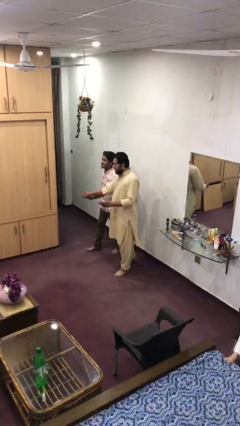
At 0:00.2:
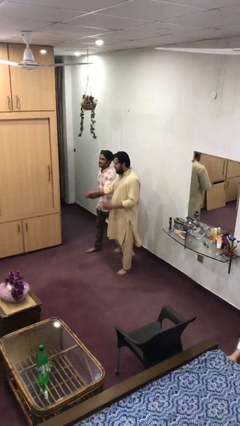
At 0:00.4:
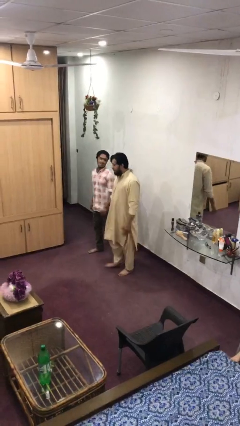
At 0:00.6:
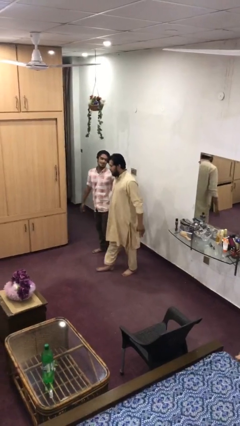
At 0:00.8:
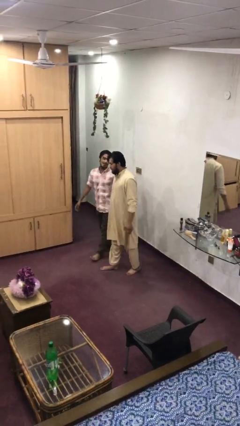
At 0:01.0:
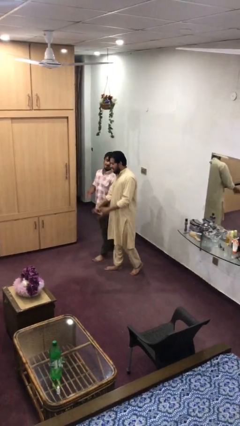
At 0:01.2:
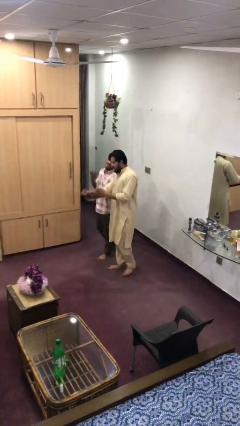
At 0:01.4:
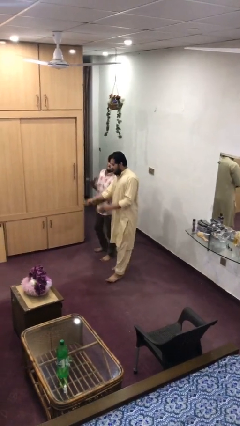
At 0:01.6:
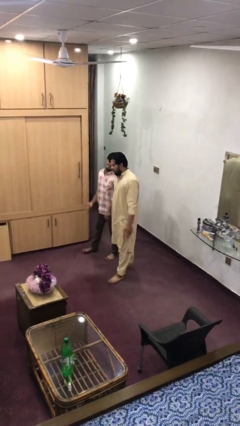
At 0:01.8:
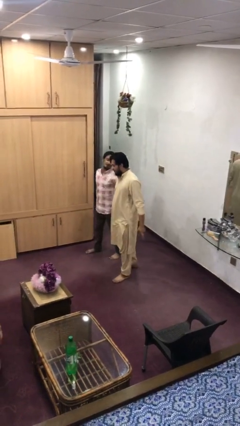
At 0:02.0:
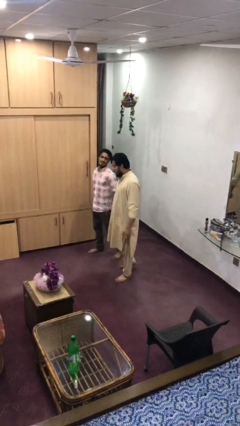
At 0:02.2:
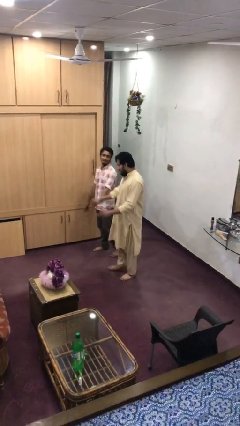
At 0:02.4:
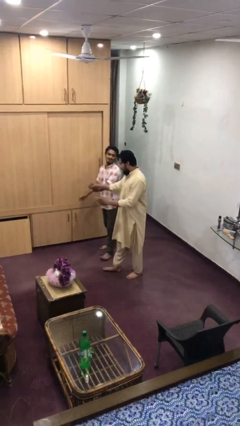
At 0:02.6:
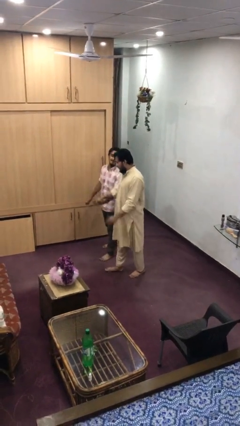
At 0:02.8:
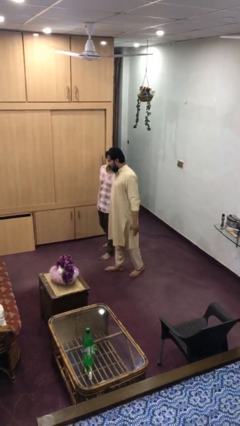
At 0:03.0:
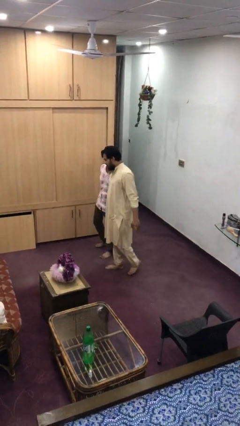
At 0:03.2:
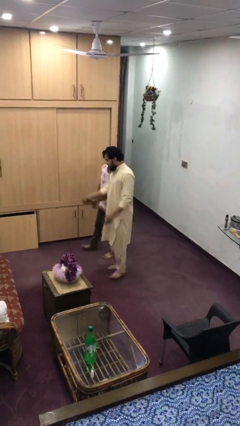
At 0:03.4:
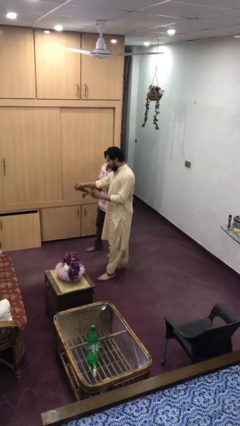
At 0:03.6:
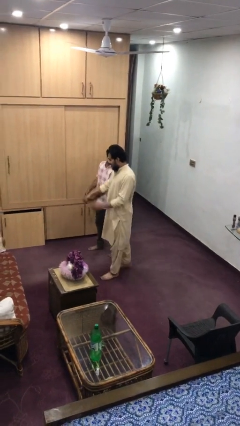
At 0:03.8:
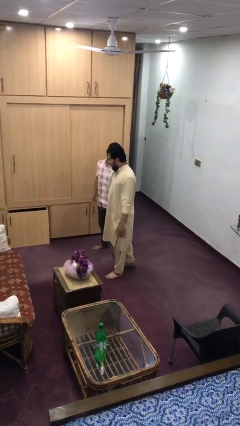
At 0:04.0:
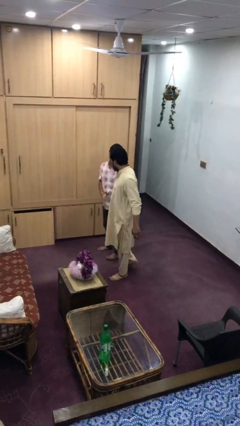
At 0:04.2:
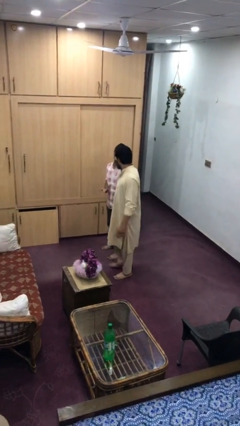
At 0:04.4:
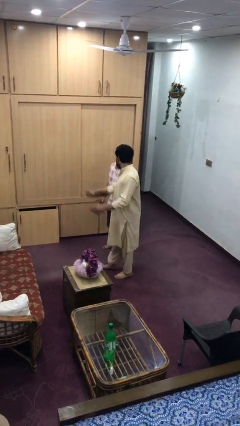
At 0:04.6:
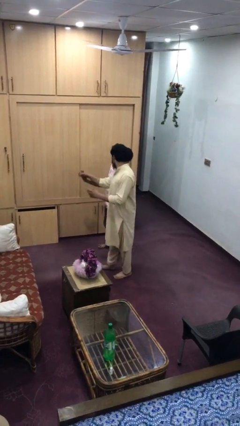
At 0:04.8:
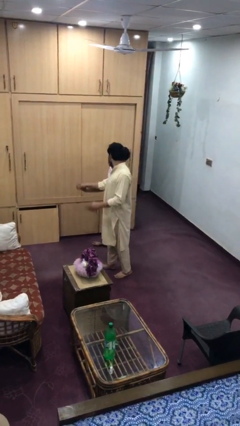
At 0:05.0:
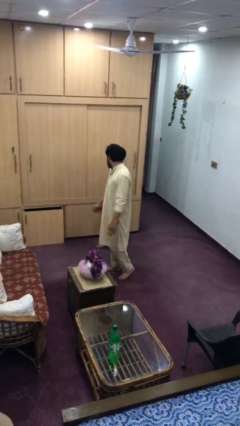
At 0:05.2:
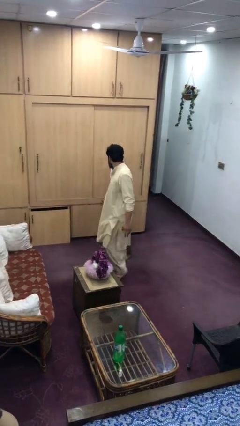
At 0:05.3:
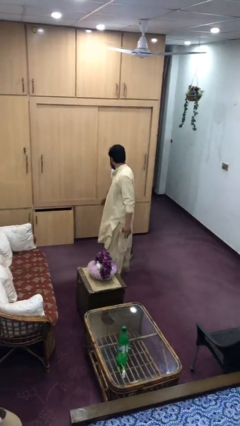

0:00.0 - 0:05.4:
person holds hand

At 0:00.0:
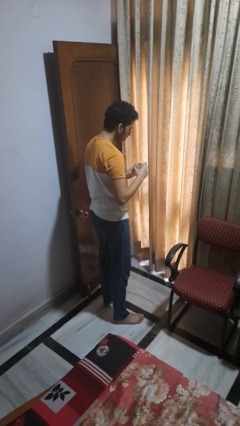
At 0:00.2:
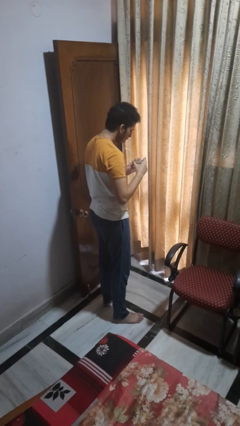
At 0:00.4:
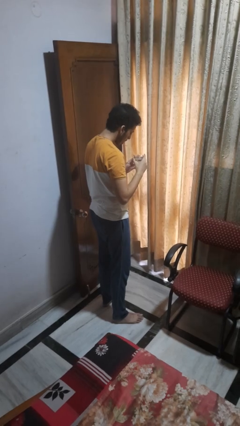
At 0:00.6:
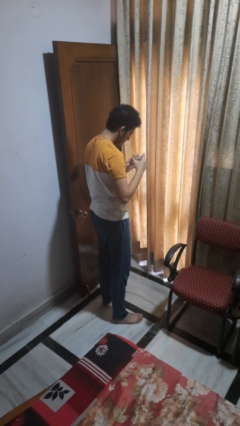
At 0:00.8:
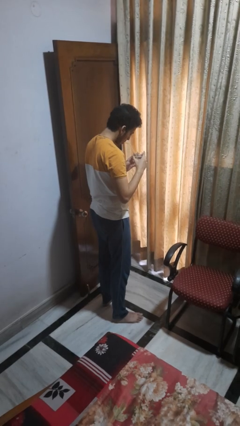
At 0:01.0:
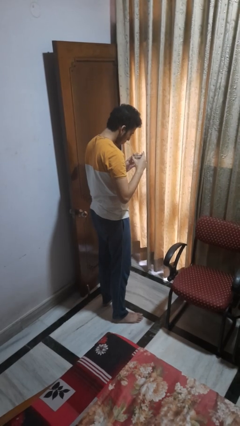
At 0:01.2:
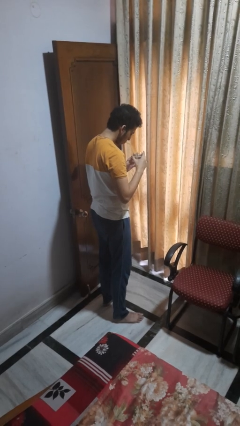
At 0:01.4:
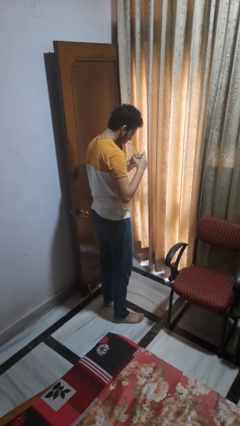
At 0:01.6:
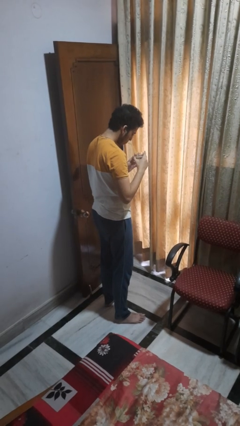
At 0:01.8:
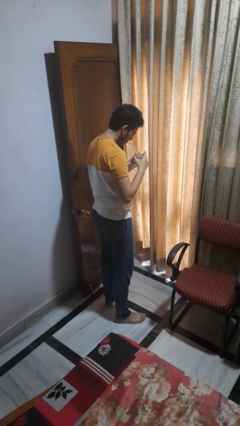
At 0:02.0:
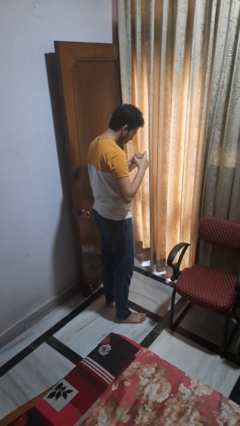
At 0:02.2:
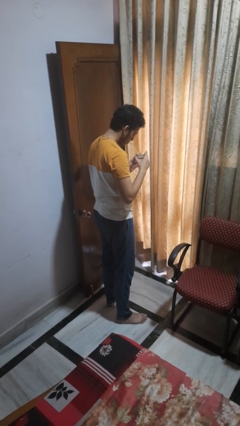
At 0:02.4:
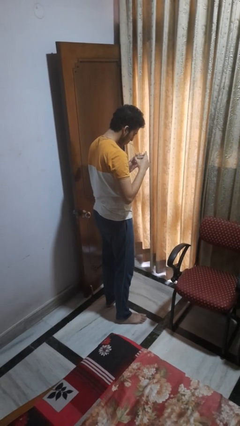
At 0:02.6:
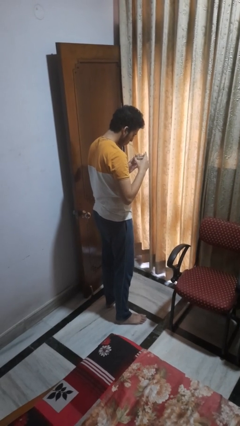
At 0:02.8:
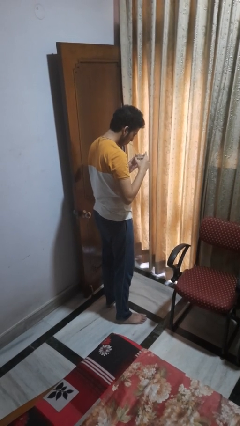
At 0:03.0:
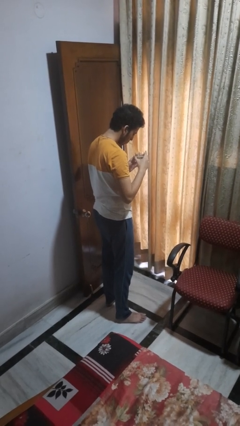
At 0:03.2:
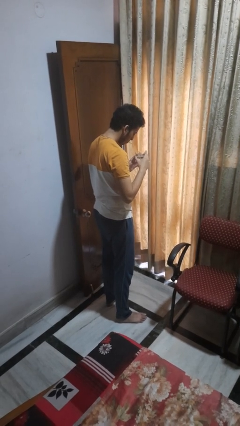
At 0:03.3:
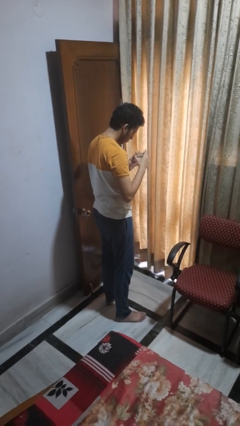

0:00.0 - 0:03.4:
person drinks from straw

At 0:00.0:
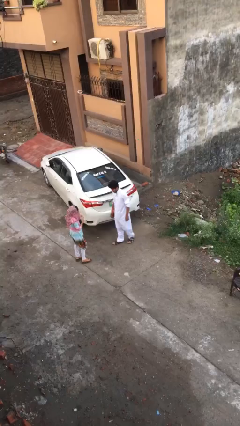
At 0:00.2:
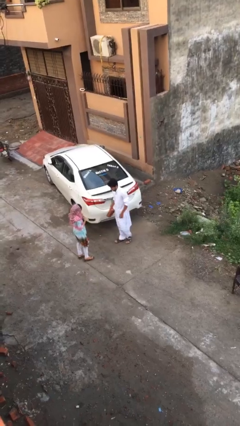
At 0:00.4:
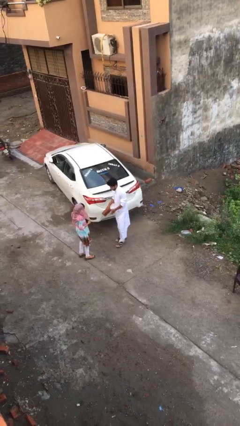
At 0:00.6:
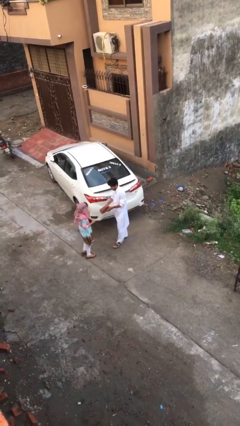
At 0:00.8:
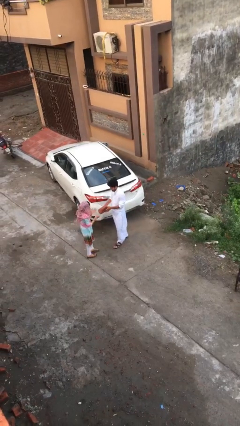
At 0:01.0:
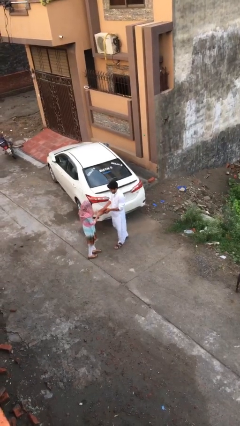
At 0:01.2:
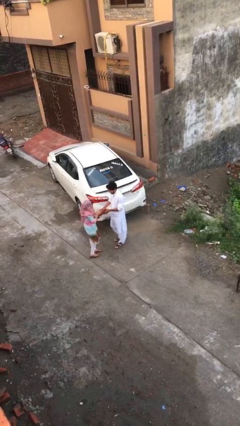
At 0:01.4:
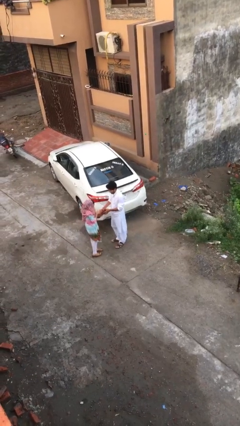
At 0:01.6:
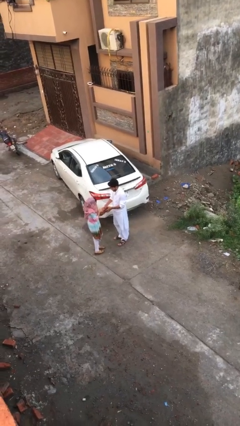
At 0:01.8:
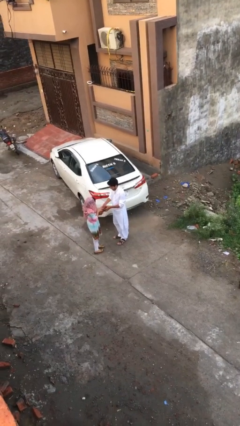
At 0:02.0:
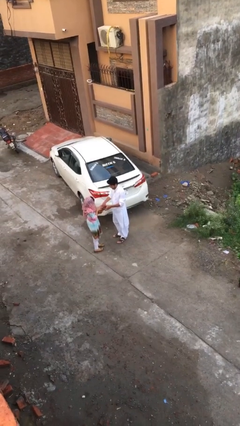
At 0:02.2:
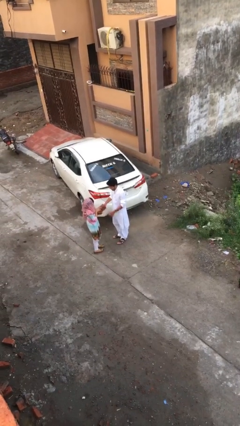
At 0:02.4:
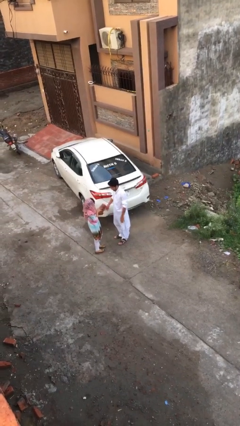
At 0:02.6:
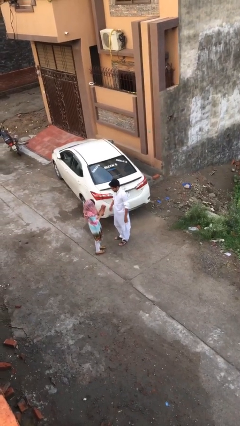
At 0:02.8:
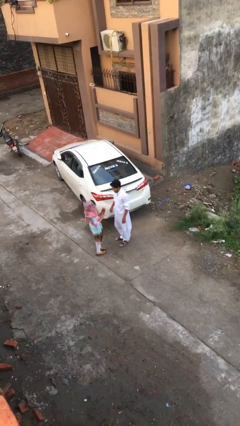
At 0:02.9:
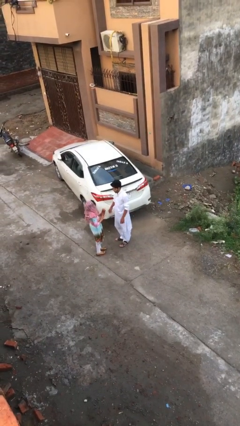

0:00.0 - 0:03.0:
person transfers object to person

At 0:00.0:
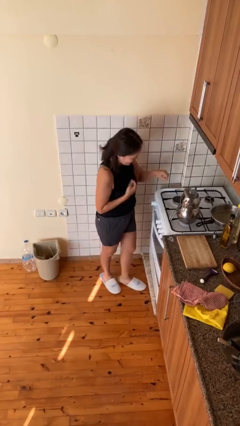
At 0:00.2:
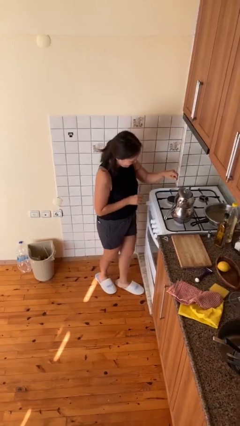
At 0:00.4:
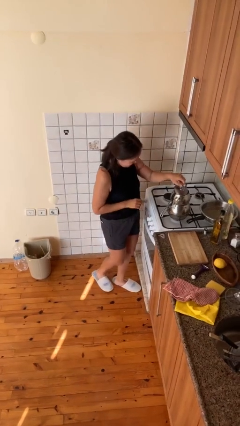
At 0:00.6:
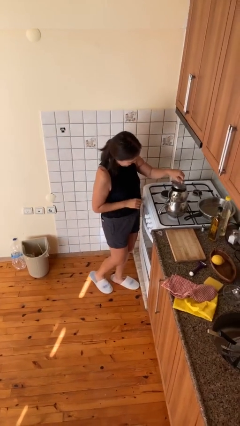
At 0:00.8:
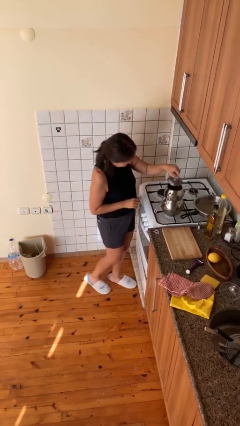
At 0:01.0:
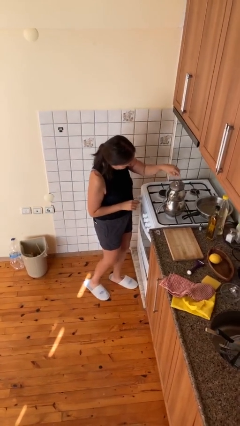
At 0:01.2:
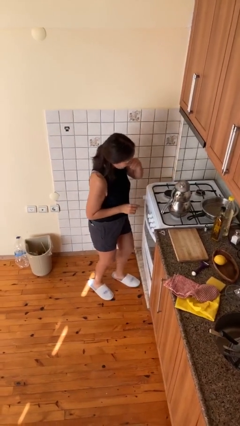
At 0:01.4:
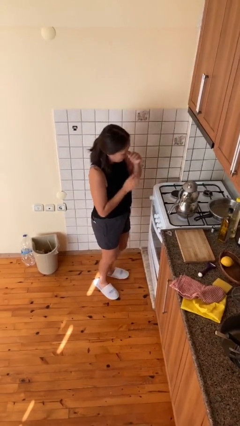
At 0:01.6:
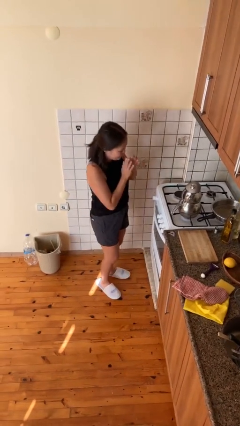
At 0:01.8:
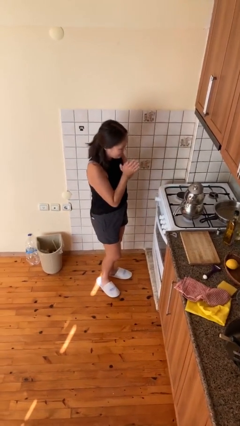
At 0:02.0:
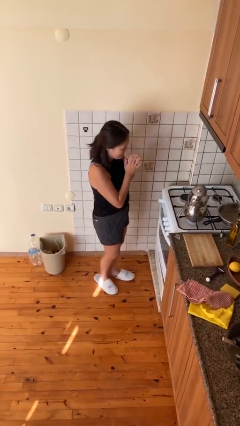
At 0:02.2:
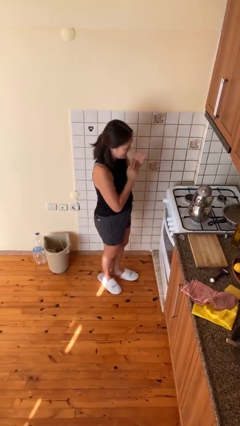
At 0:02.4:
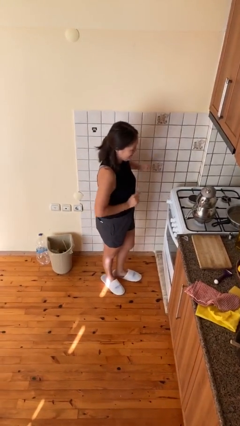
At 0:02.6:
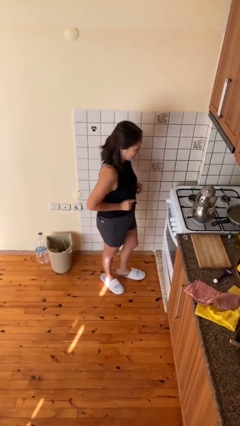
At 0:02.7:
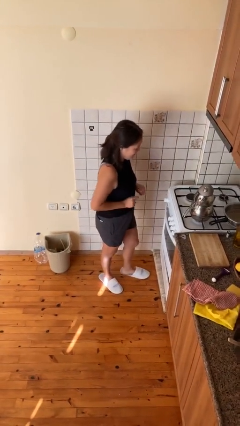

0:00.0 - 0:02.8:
person burns hand

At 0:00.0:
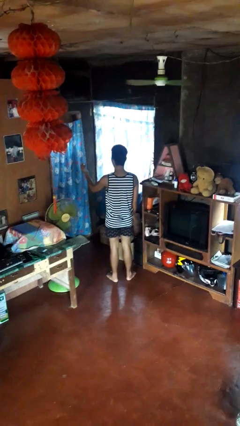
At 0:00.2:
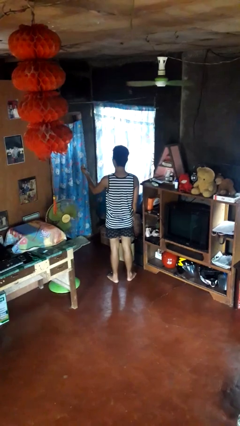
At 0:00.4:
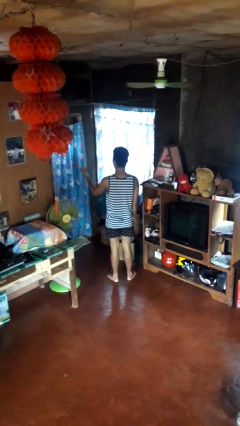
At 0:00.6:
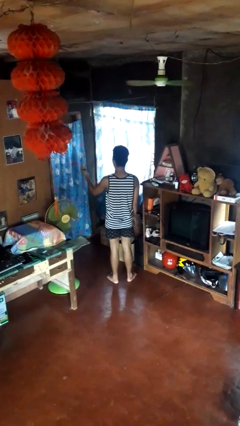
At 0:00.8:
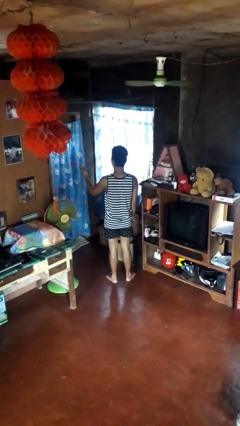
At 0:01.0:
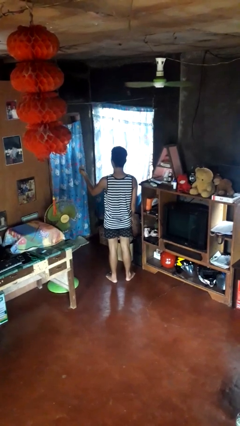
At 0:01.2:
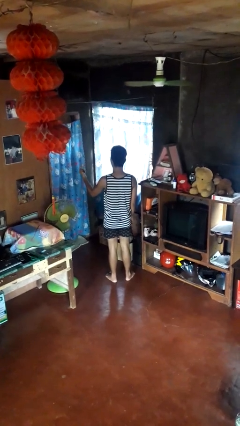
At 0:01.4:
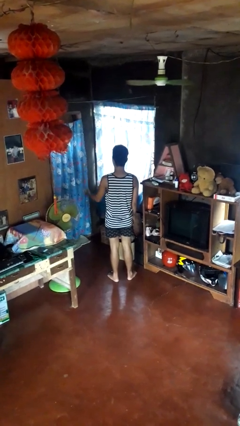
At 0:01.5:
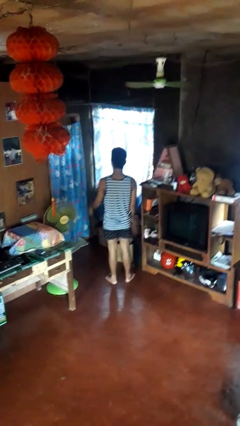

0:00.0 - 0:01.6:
person snaps fingers

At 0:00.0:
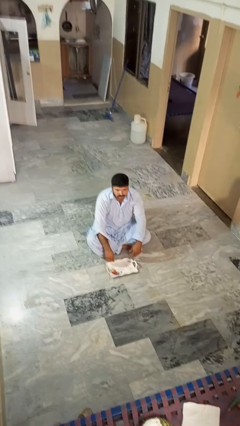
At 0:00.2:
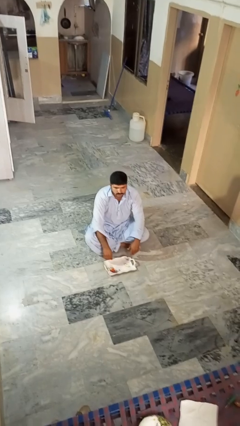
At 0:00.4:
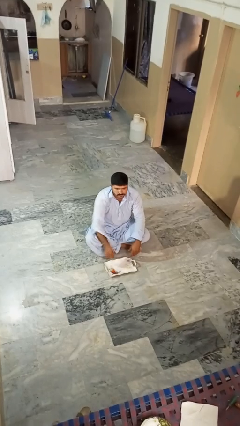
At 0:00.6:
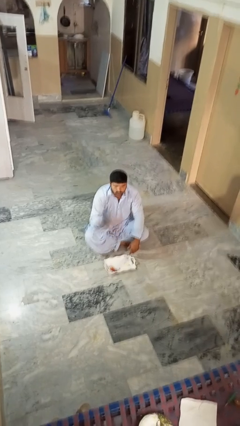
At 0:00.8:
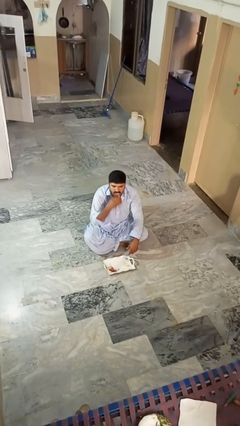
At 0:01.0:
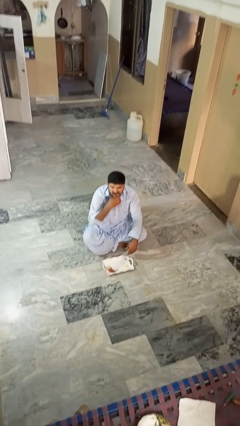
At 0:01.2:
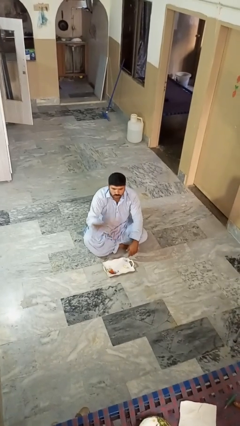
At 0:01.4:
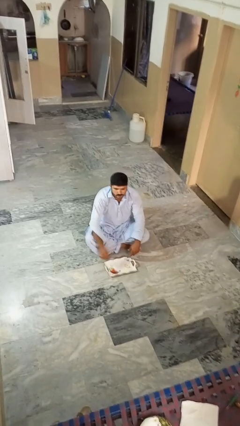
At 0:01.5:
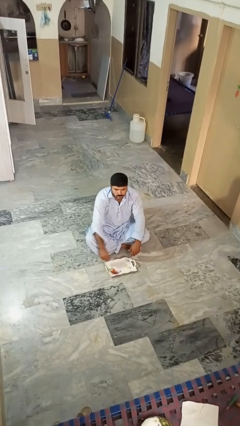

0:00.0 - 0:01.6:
person eats apple
